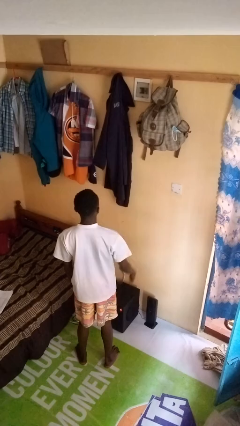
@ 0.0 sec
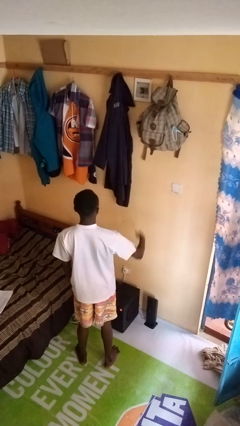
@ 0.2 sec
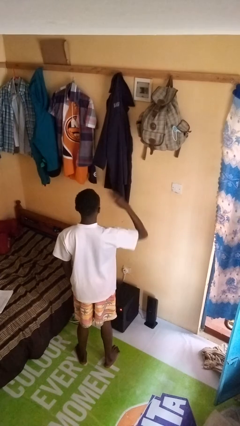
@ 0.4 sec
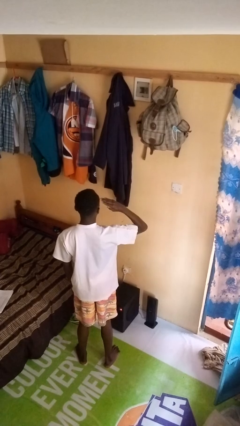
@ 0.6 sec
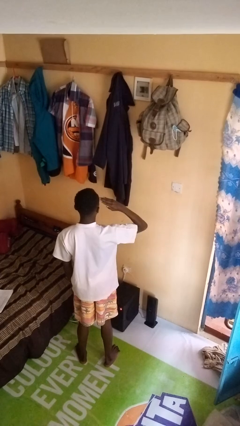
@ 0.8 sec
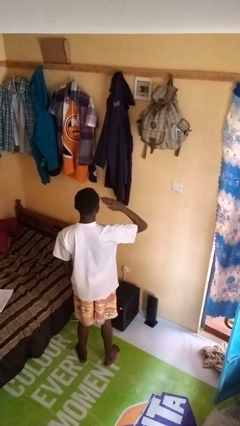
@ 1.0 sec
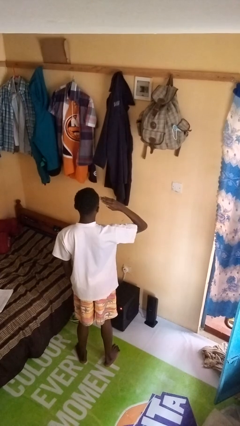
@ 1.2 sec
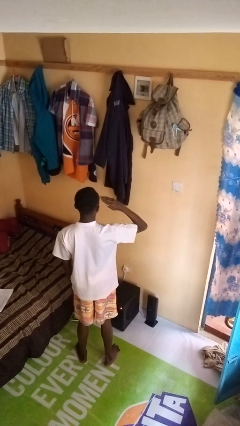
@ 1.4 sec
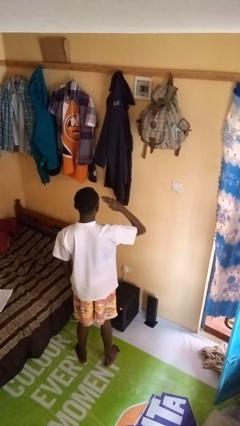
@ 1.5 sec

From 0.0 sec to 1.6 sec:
person salutes

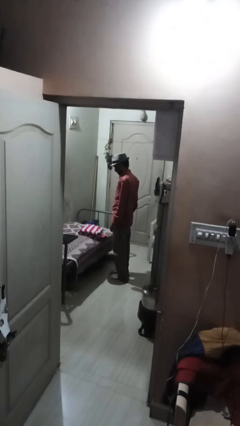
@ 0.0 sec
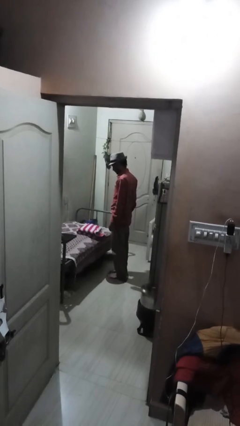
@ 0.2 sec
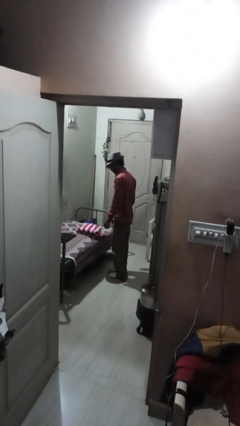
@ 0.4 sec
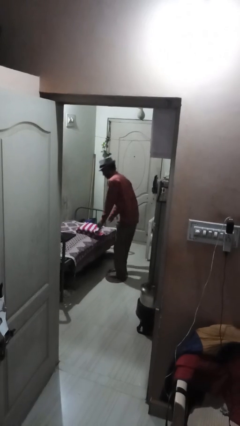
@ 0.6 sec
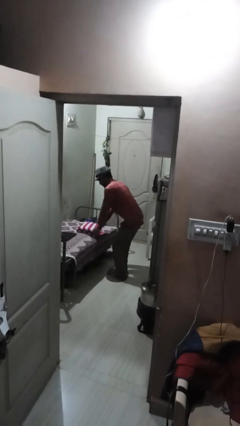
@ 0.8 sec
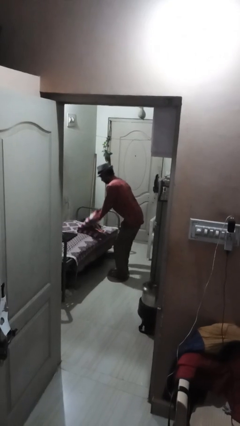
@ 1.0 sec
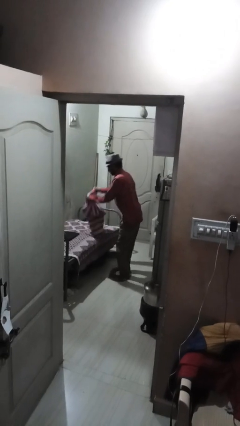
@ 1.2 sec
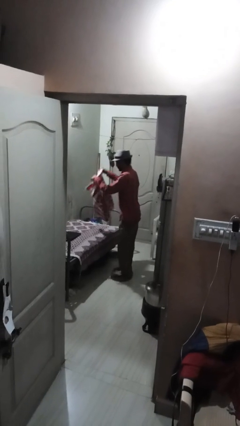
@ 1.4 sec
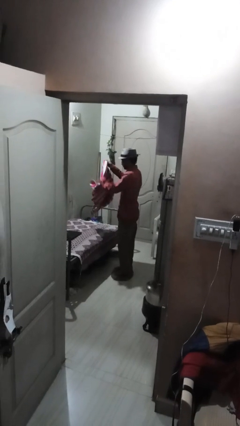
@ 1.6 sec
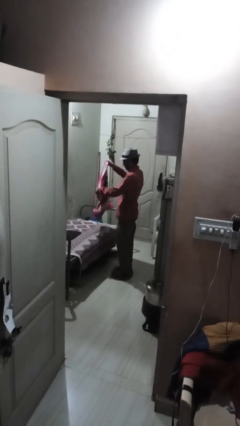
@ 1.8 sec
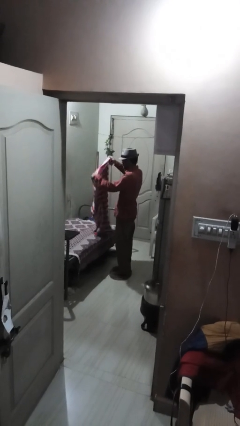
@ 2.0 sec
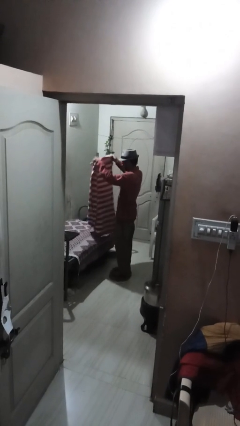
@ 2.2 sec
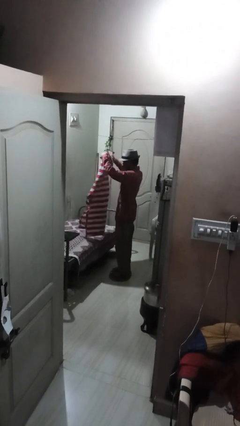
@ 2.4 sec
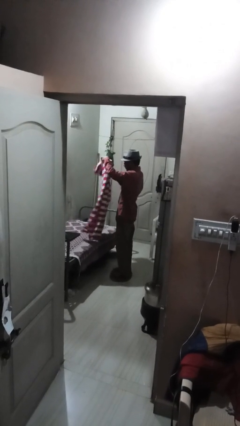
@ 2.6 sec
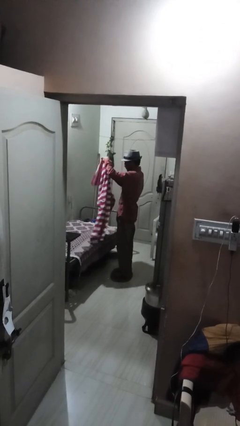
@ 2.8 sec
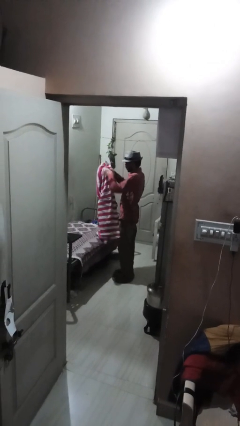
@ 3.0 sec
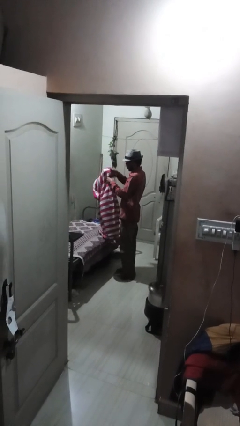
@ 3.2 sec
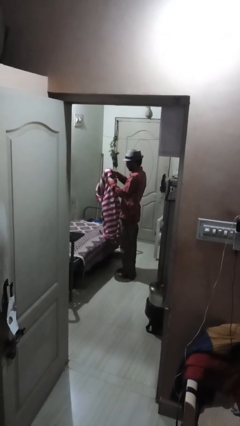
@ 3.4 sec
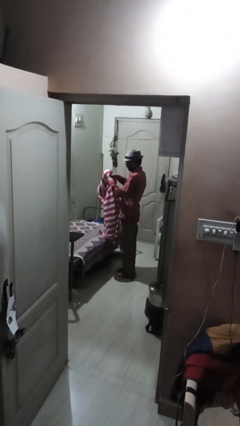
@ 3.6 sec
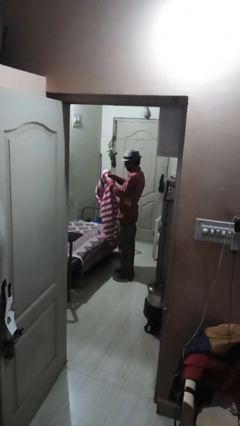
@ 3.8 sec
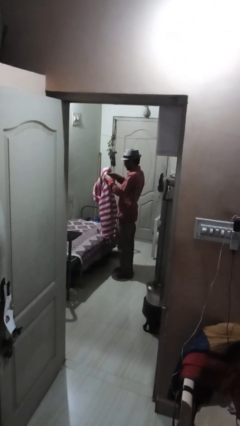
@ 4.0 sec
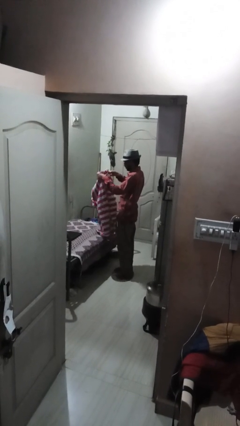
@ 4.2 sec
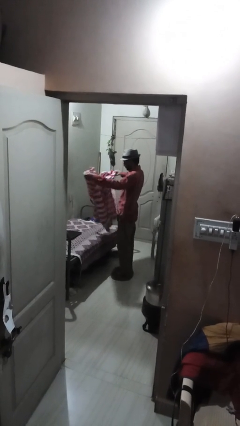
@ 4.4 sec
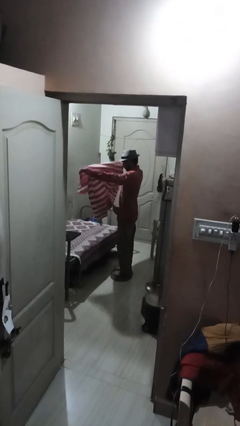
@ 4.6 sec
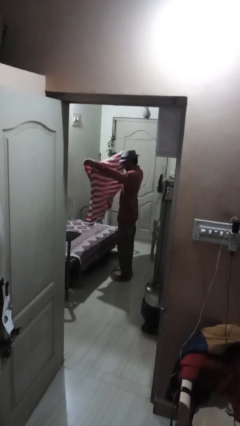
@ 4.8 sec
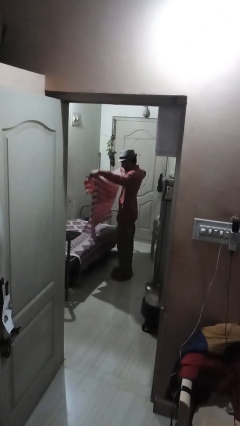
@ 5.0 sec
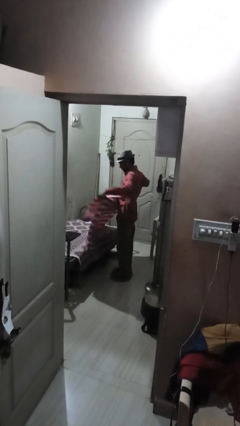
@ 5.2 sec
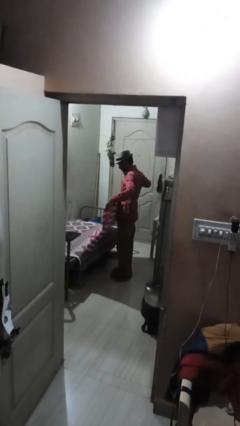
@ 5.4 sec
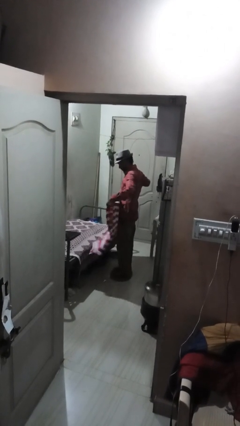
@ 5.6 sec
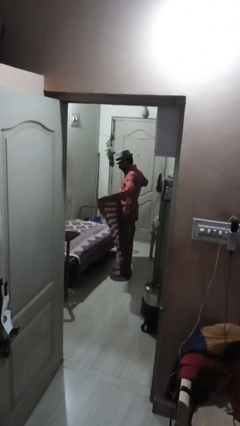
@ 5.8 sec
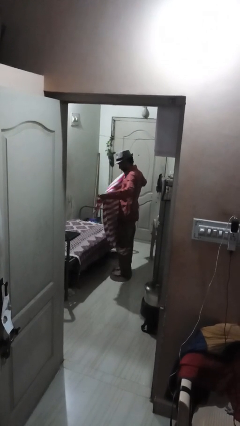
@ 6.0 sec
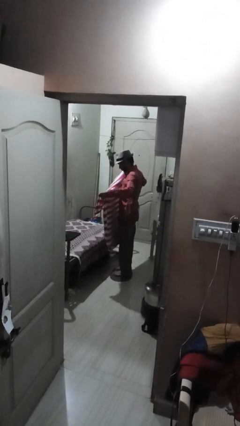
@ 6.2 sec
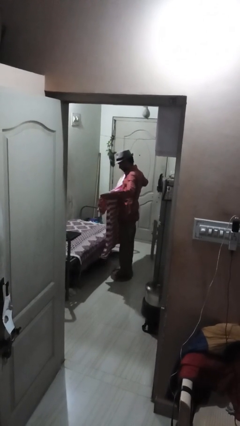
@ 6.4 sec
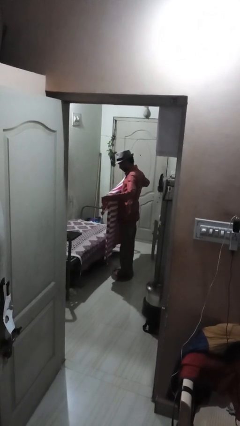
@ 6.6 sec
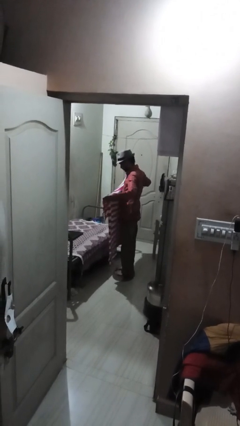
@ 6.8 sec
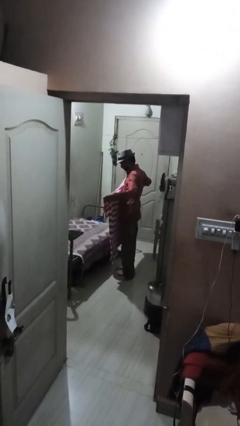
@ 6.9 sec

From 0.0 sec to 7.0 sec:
person unfolds blanket

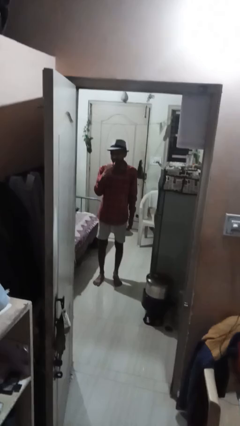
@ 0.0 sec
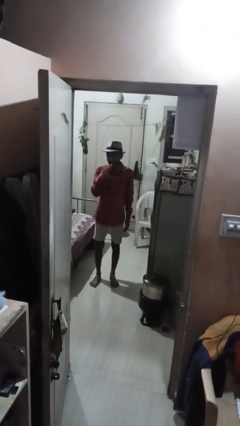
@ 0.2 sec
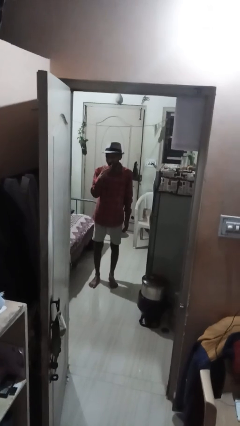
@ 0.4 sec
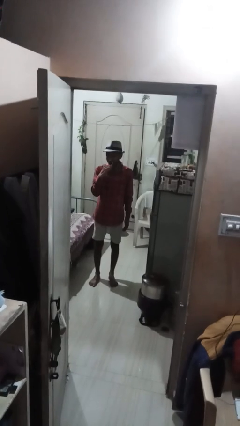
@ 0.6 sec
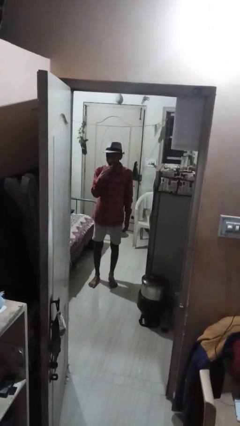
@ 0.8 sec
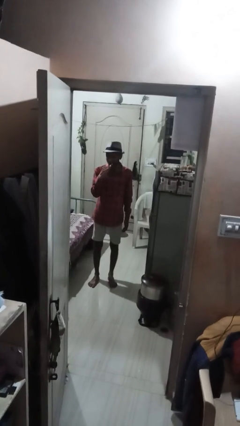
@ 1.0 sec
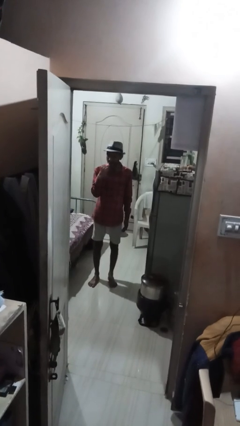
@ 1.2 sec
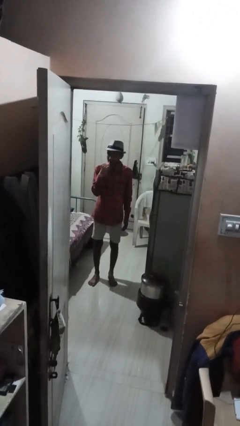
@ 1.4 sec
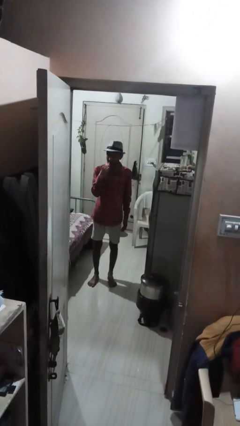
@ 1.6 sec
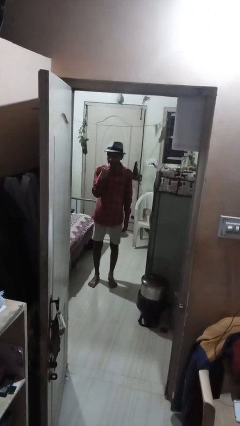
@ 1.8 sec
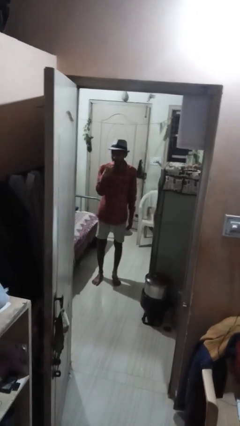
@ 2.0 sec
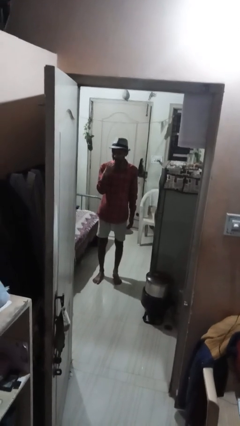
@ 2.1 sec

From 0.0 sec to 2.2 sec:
person brushes teeth

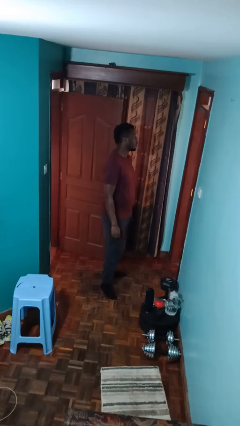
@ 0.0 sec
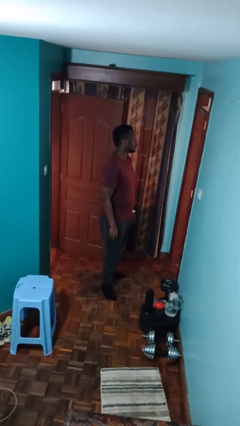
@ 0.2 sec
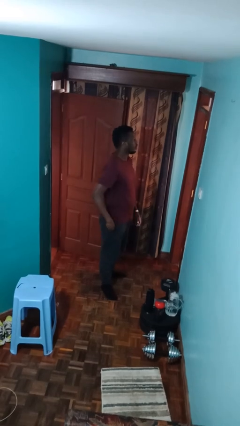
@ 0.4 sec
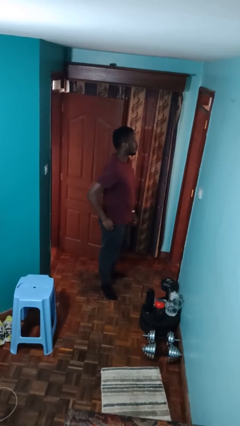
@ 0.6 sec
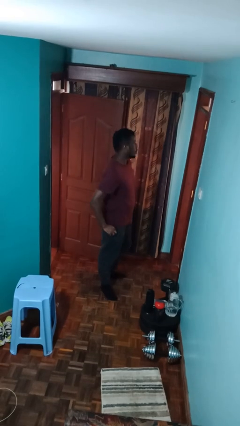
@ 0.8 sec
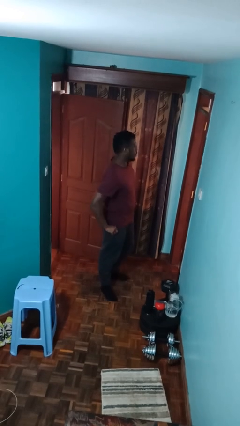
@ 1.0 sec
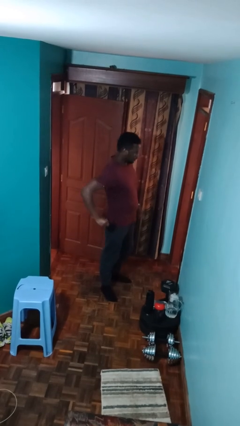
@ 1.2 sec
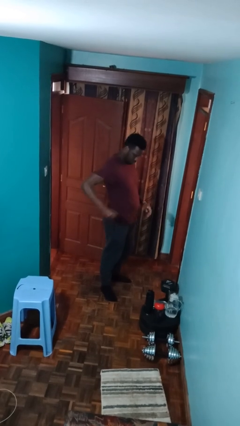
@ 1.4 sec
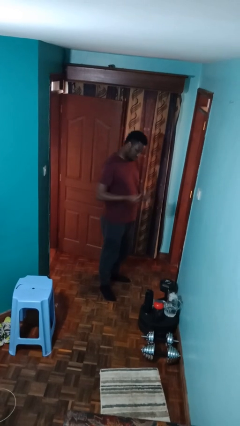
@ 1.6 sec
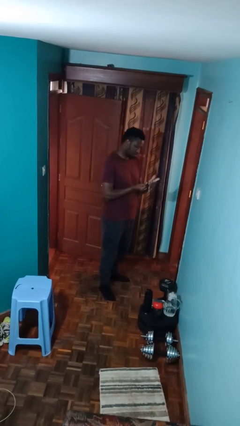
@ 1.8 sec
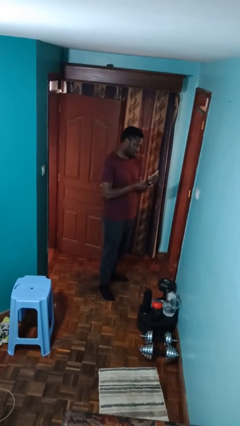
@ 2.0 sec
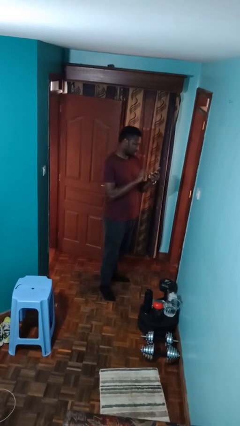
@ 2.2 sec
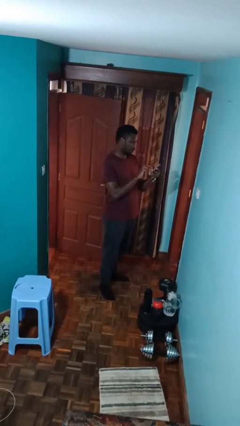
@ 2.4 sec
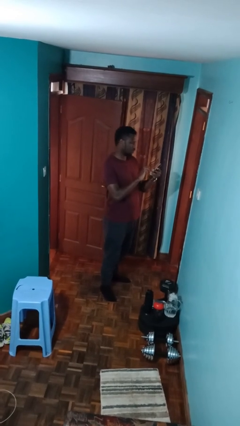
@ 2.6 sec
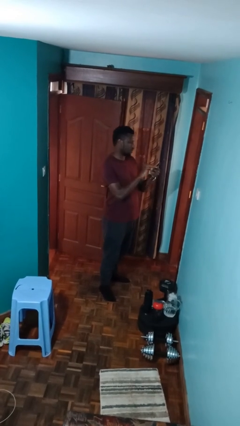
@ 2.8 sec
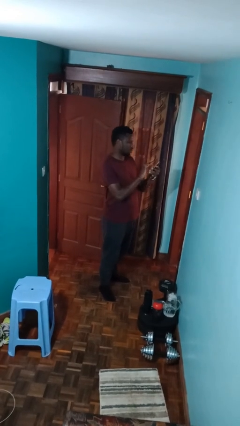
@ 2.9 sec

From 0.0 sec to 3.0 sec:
person takes phone from pocket

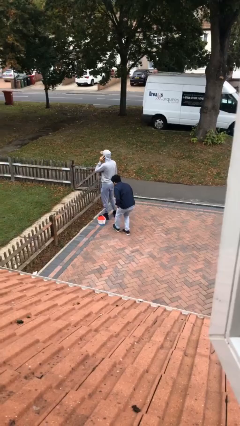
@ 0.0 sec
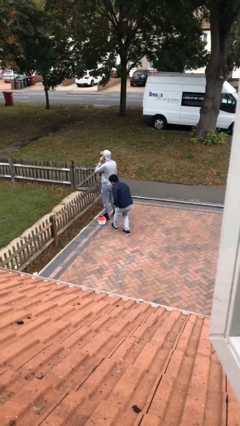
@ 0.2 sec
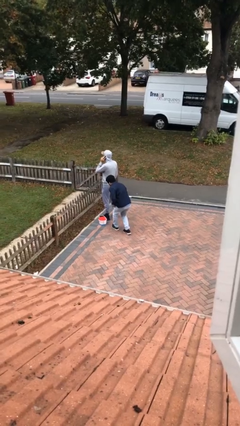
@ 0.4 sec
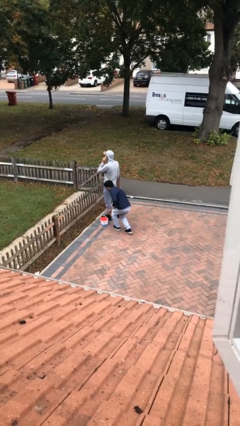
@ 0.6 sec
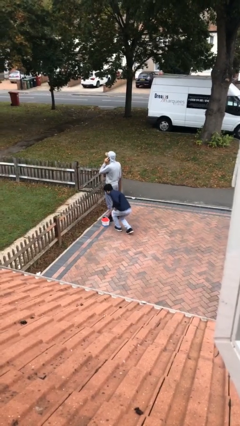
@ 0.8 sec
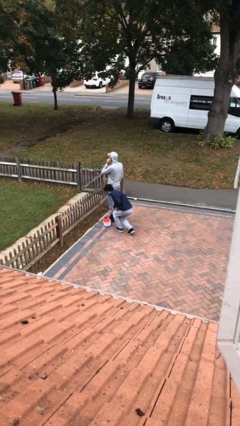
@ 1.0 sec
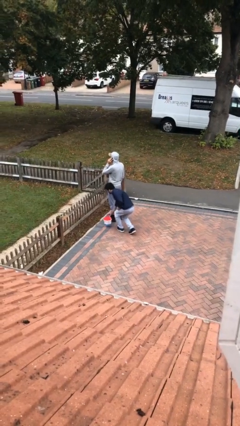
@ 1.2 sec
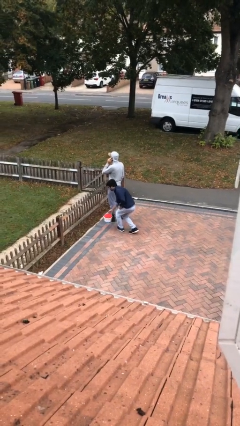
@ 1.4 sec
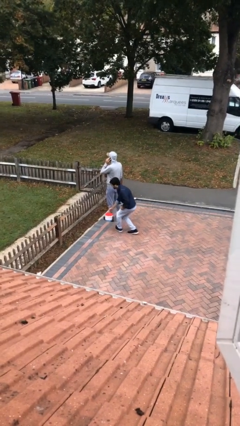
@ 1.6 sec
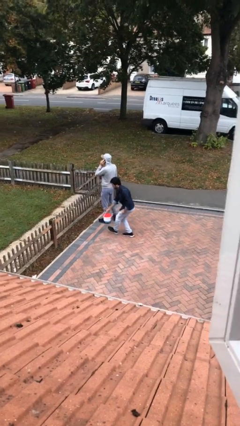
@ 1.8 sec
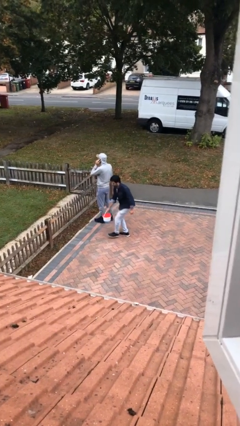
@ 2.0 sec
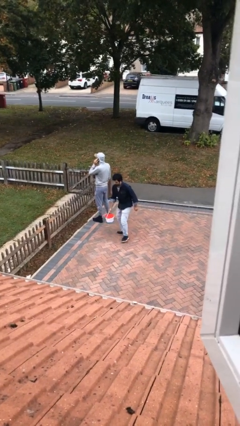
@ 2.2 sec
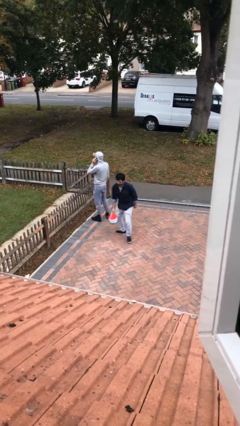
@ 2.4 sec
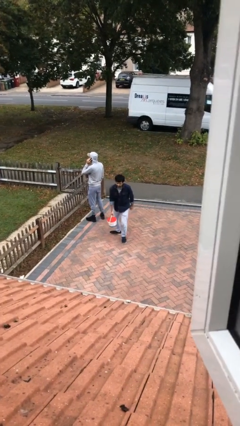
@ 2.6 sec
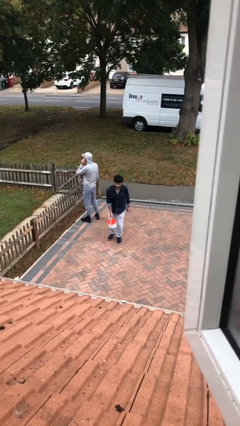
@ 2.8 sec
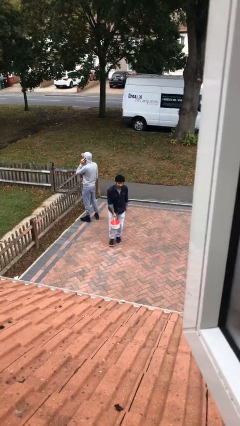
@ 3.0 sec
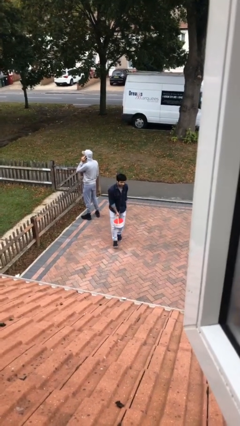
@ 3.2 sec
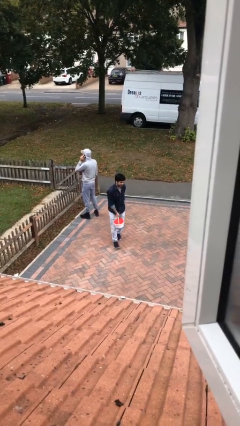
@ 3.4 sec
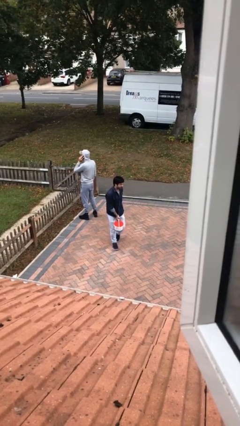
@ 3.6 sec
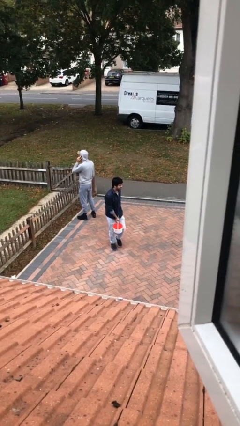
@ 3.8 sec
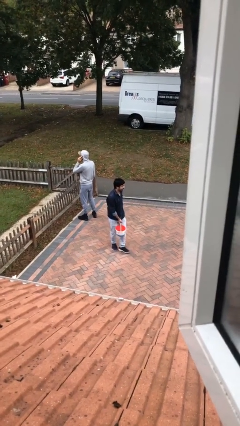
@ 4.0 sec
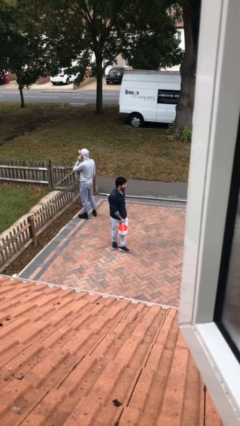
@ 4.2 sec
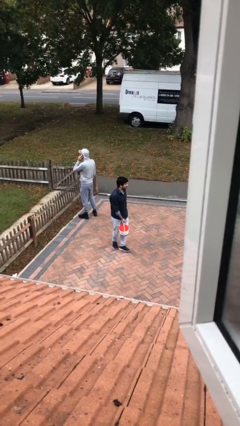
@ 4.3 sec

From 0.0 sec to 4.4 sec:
person steals object from person
